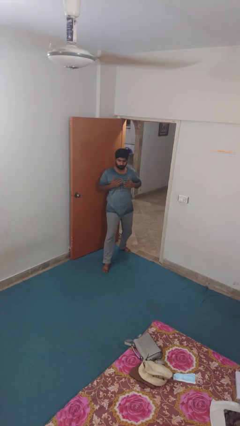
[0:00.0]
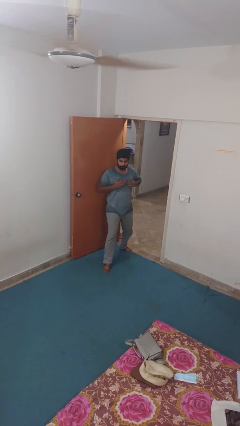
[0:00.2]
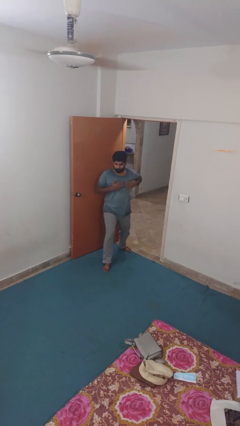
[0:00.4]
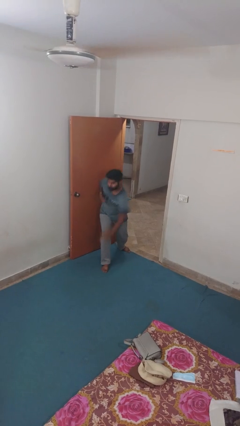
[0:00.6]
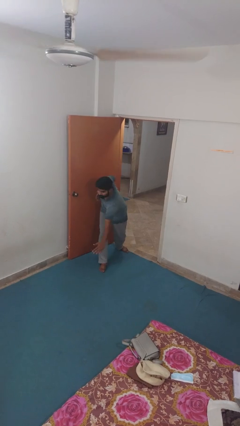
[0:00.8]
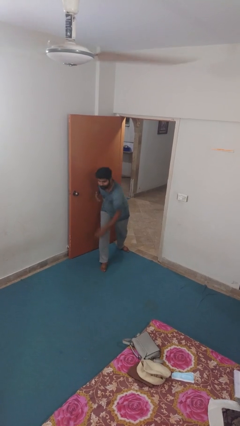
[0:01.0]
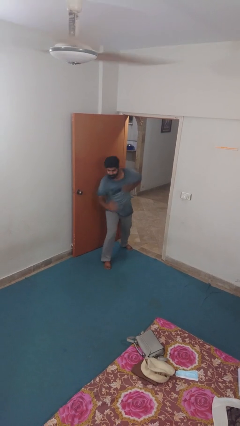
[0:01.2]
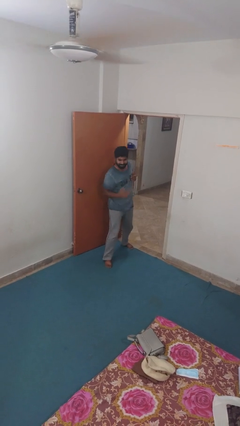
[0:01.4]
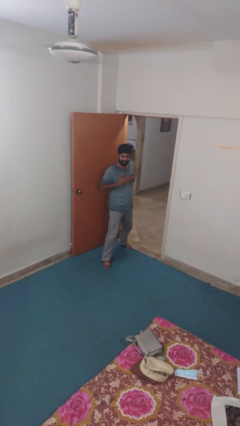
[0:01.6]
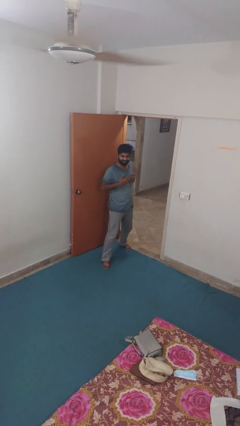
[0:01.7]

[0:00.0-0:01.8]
person karate chop

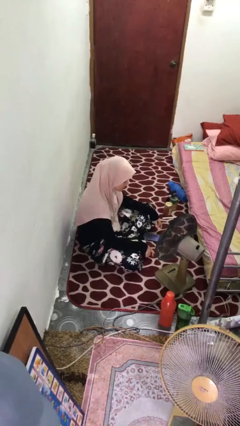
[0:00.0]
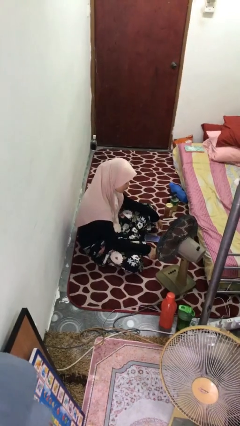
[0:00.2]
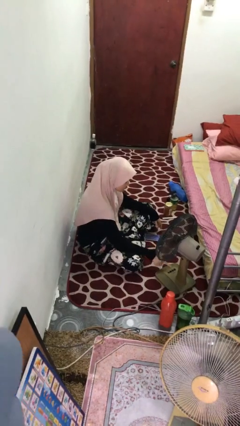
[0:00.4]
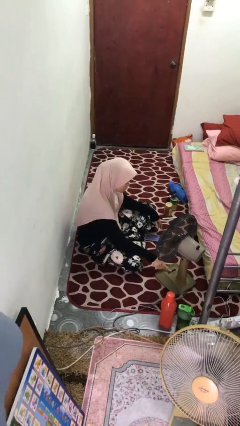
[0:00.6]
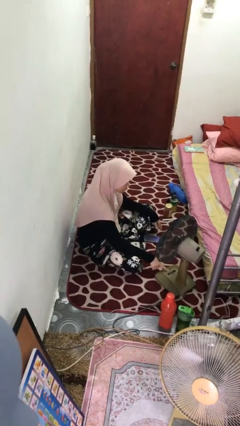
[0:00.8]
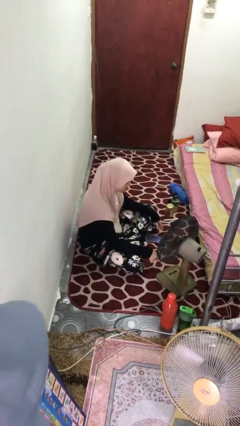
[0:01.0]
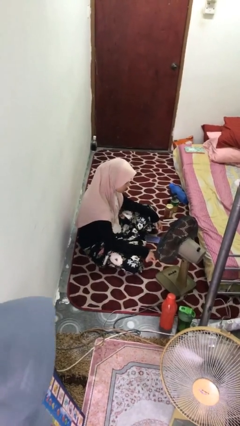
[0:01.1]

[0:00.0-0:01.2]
person turns off fan

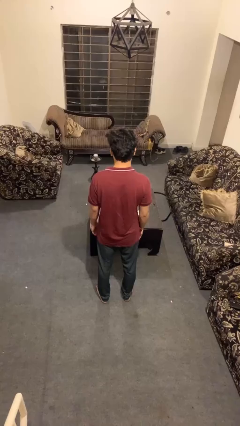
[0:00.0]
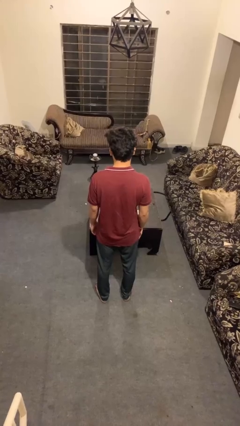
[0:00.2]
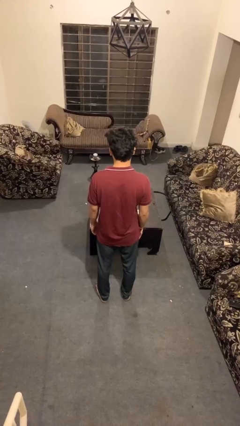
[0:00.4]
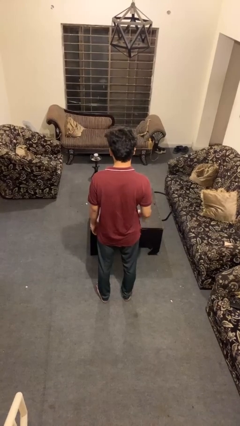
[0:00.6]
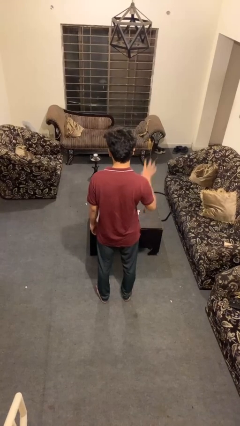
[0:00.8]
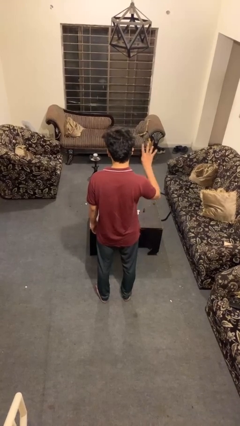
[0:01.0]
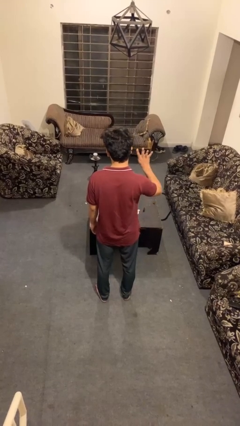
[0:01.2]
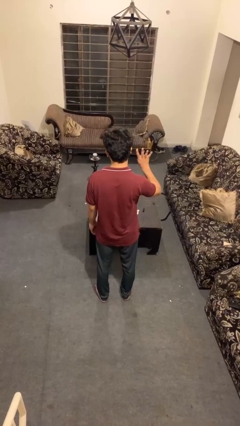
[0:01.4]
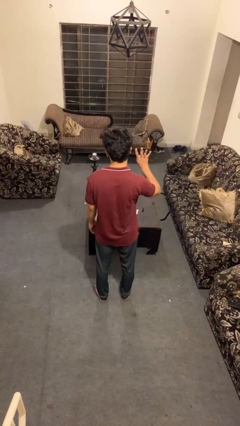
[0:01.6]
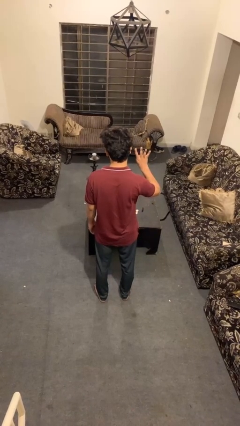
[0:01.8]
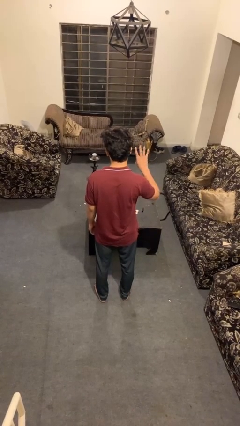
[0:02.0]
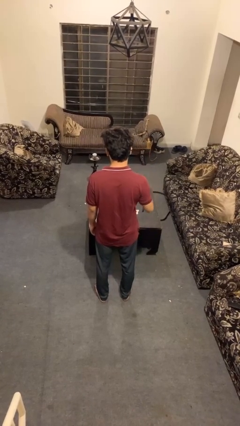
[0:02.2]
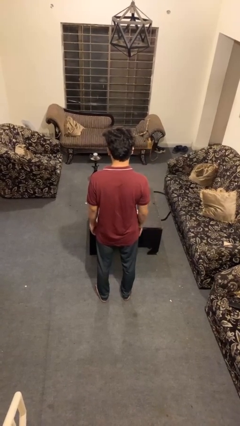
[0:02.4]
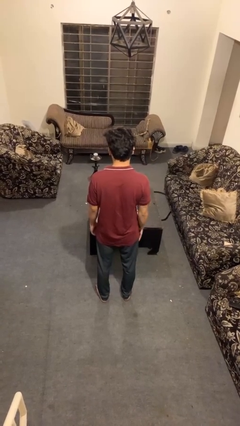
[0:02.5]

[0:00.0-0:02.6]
person gestures number four

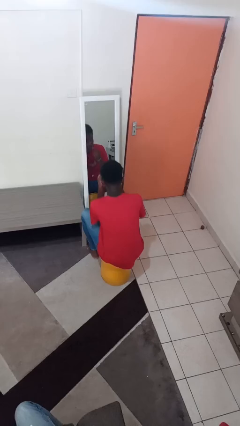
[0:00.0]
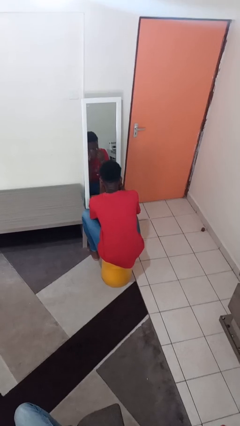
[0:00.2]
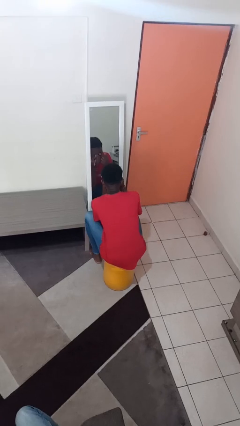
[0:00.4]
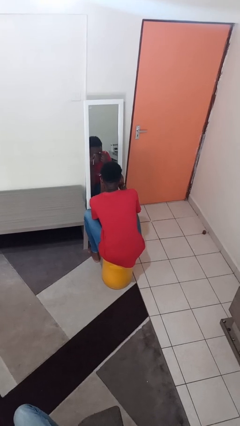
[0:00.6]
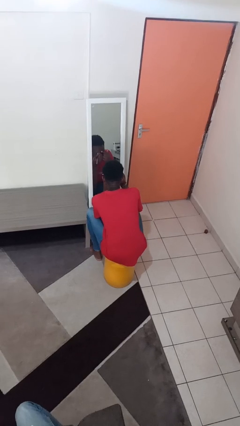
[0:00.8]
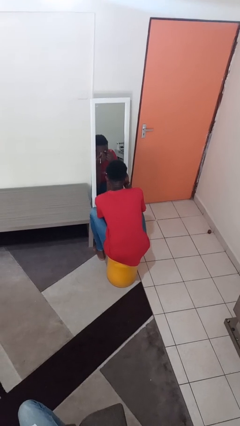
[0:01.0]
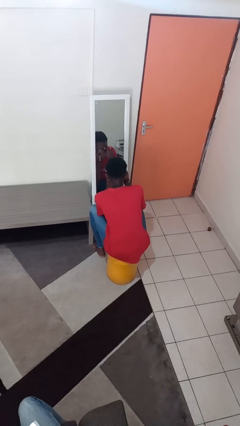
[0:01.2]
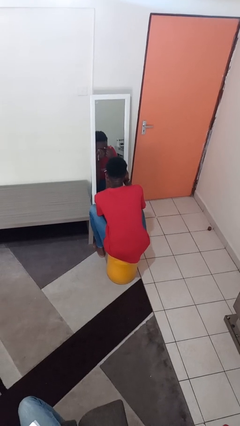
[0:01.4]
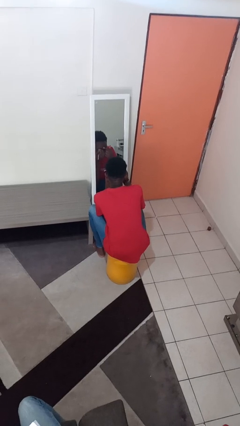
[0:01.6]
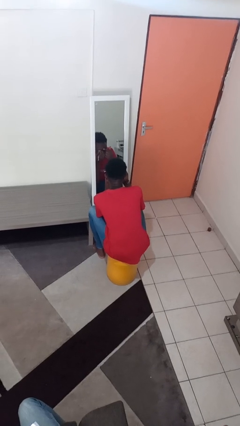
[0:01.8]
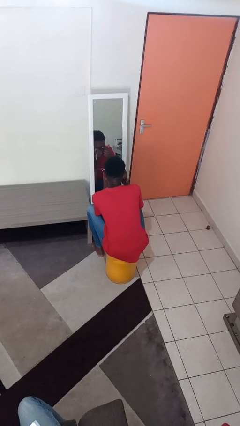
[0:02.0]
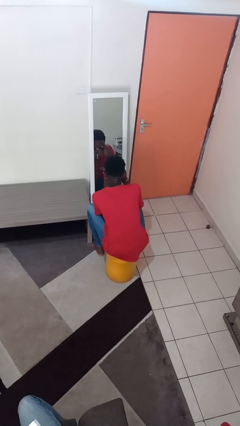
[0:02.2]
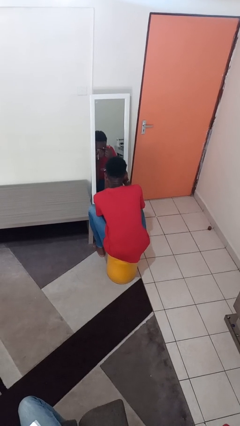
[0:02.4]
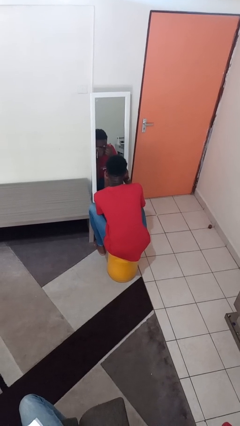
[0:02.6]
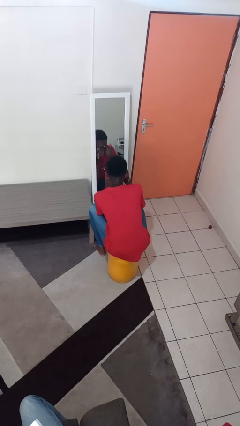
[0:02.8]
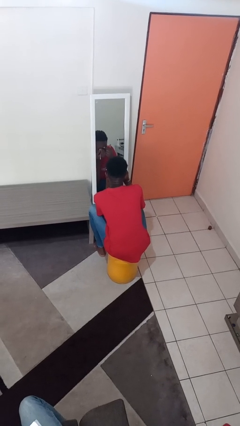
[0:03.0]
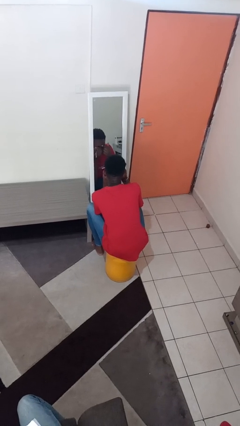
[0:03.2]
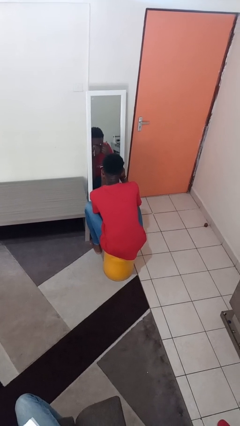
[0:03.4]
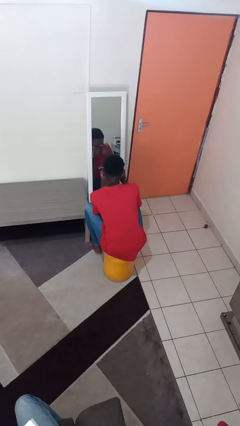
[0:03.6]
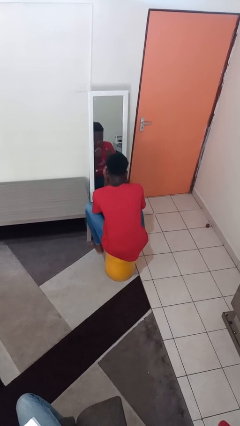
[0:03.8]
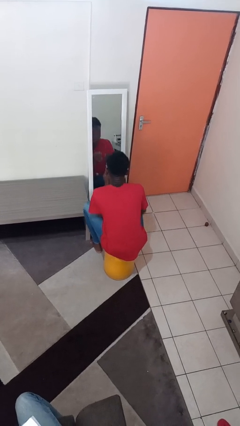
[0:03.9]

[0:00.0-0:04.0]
person applies eye makeup

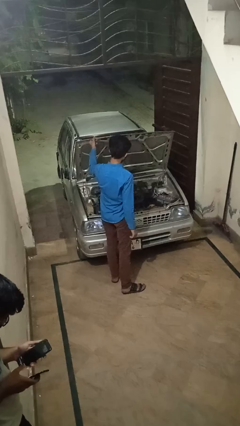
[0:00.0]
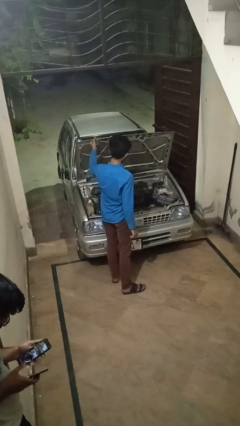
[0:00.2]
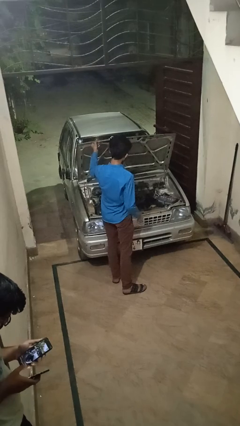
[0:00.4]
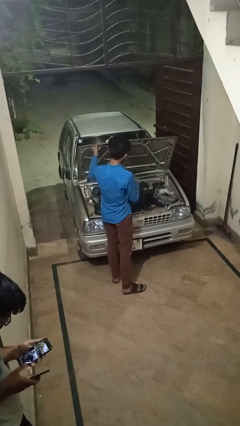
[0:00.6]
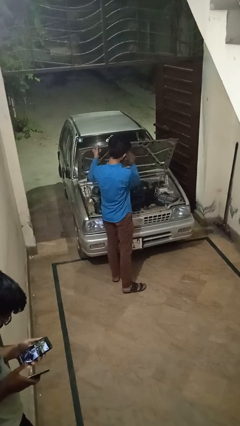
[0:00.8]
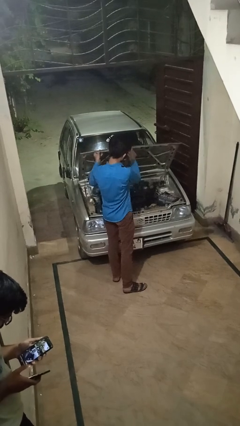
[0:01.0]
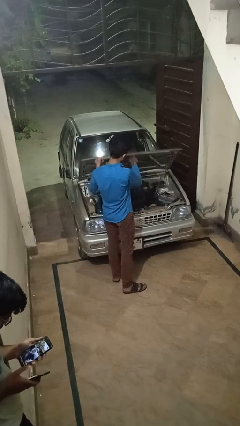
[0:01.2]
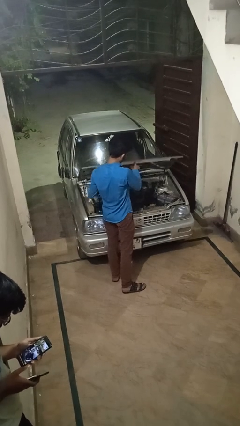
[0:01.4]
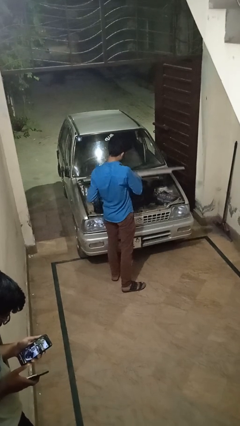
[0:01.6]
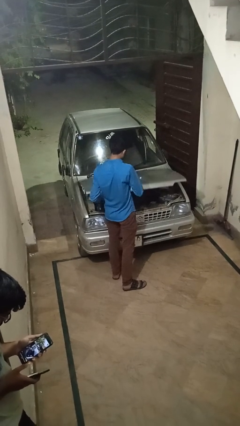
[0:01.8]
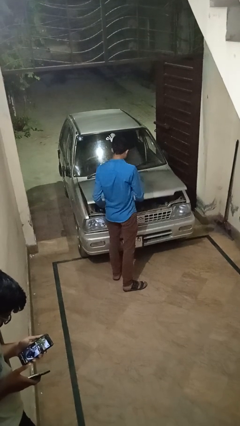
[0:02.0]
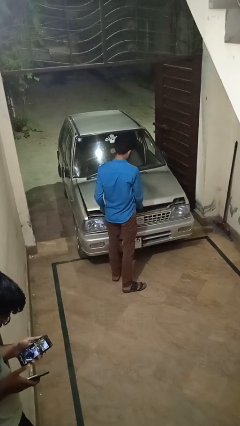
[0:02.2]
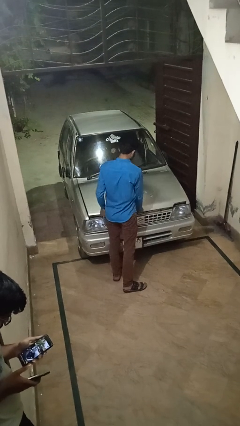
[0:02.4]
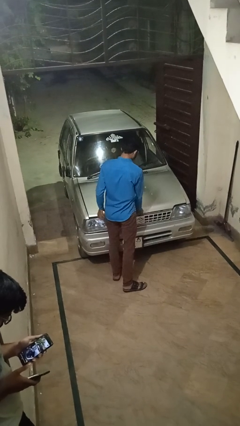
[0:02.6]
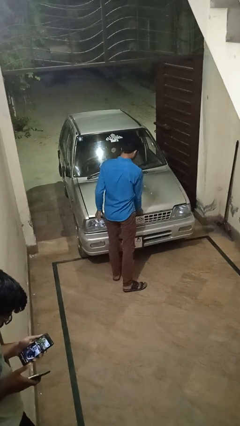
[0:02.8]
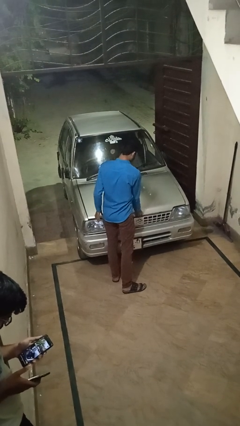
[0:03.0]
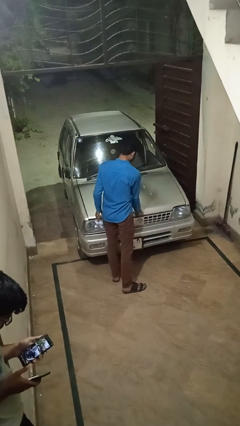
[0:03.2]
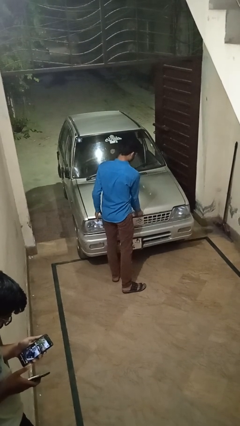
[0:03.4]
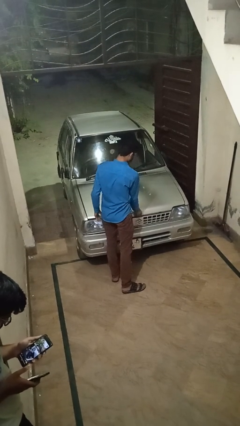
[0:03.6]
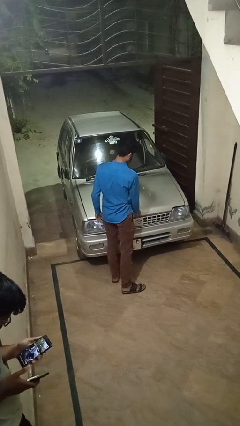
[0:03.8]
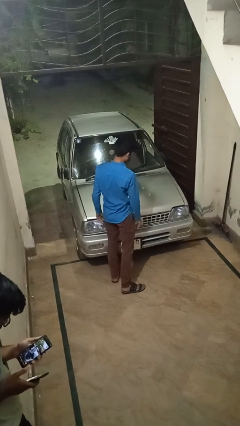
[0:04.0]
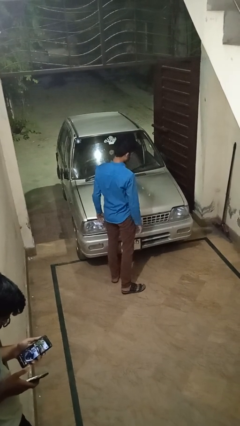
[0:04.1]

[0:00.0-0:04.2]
person closes car hood

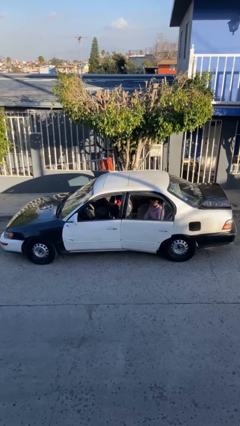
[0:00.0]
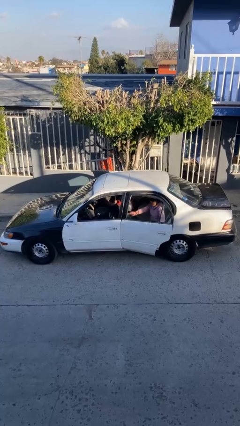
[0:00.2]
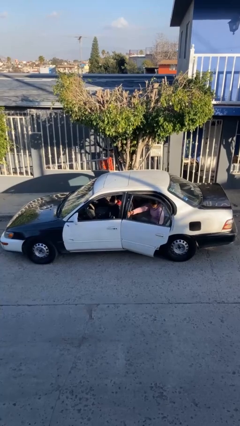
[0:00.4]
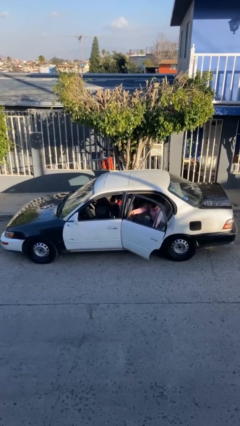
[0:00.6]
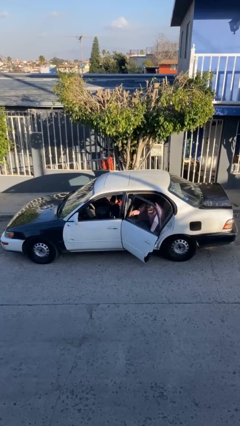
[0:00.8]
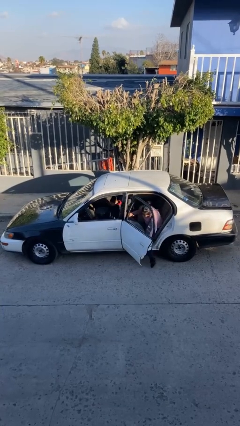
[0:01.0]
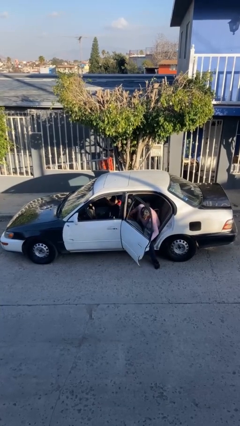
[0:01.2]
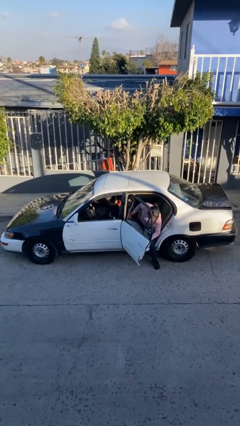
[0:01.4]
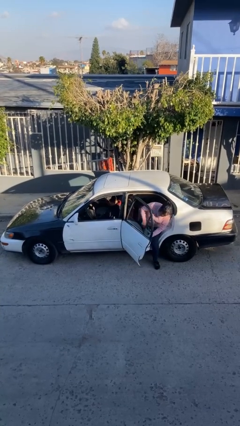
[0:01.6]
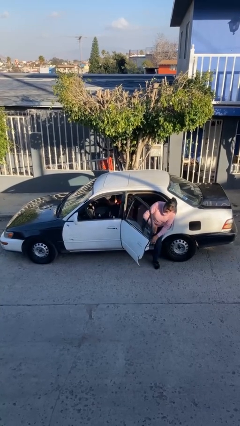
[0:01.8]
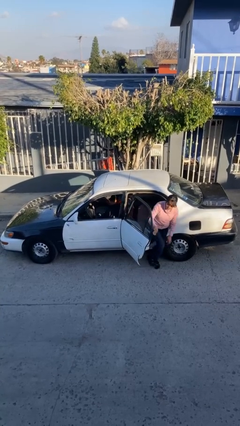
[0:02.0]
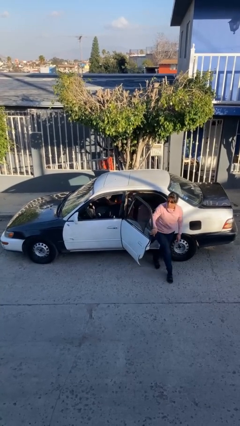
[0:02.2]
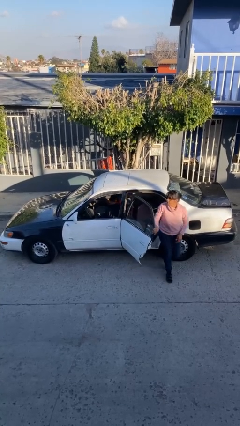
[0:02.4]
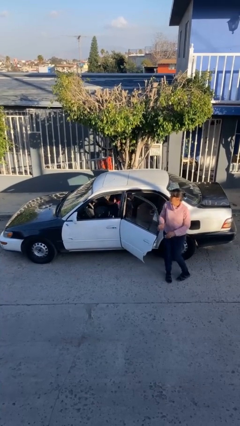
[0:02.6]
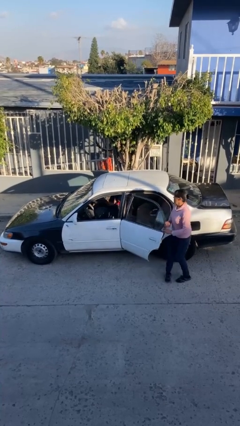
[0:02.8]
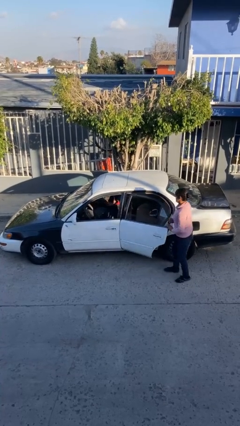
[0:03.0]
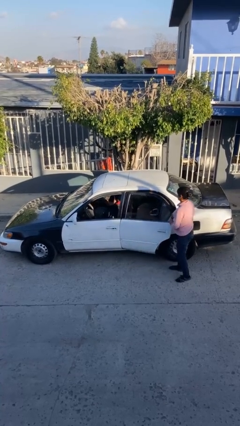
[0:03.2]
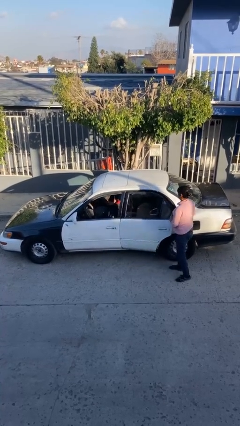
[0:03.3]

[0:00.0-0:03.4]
car drops off person

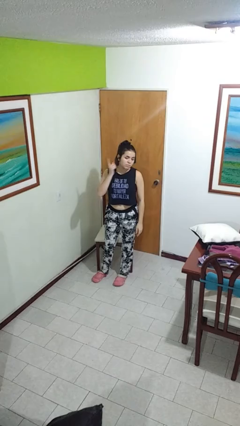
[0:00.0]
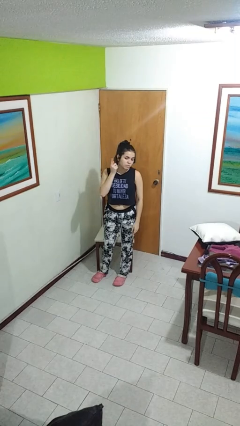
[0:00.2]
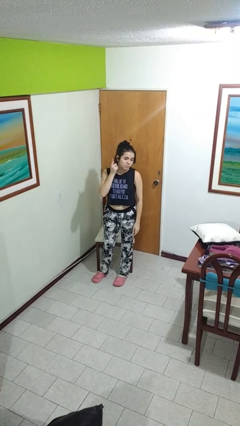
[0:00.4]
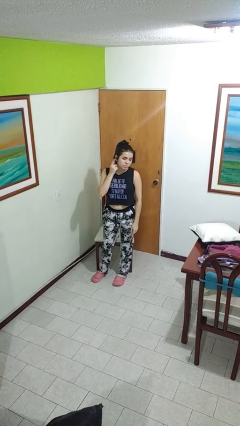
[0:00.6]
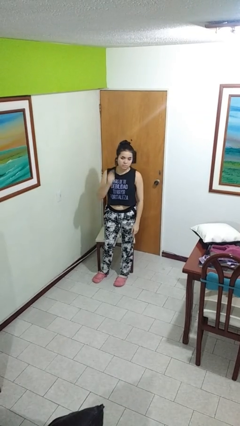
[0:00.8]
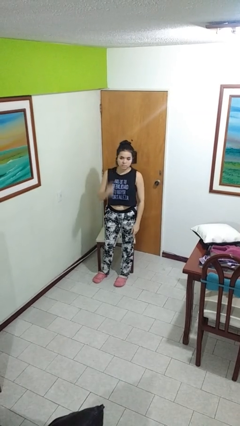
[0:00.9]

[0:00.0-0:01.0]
person gestures listen closely
